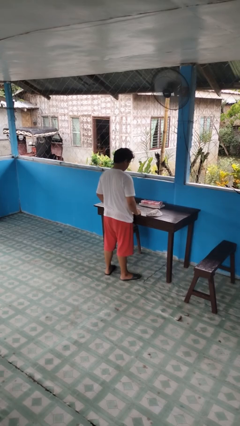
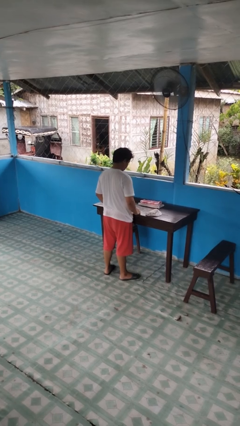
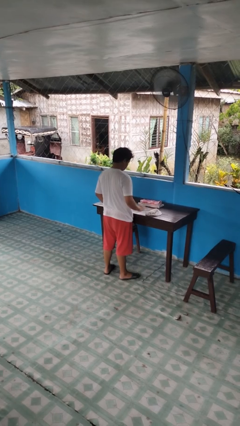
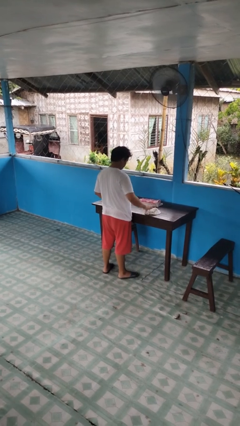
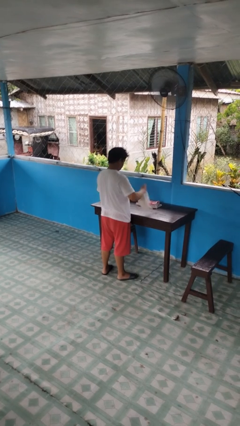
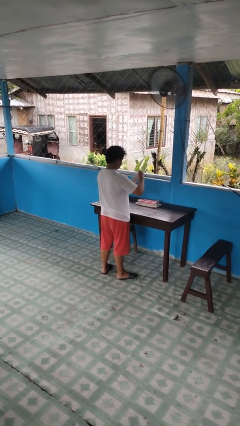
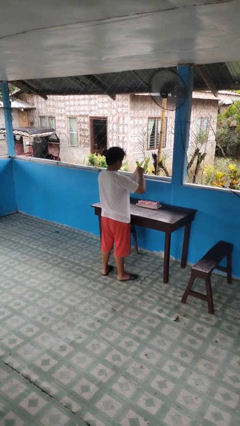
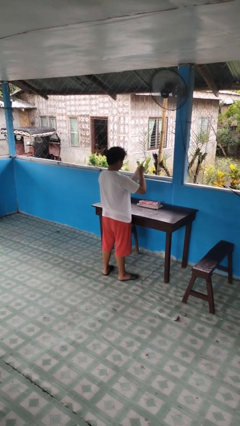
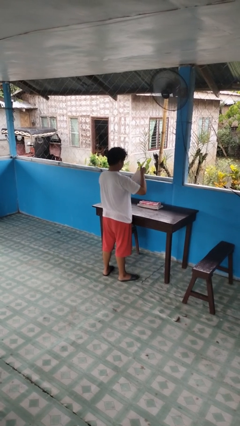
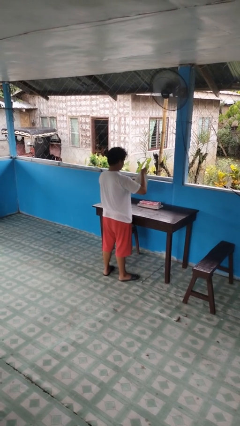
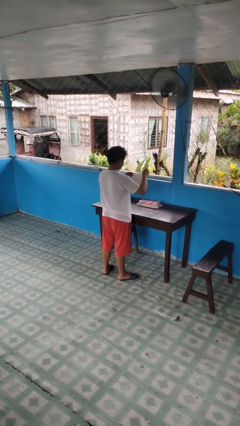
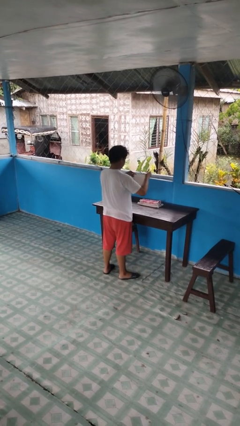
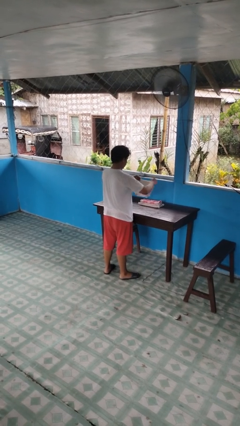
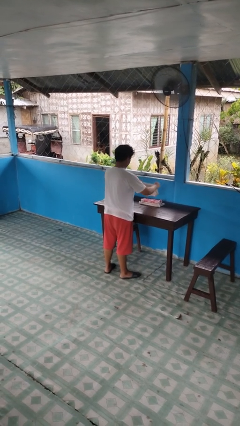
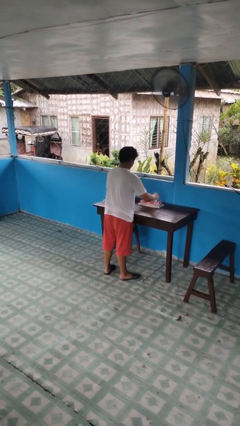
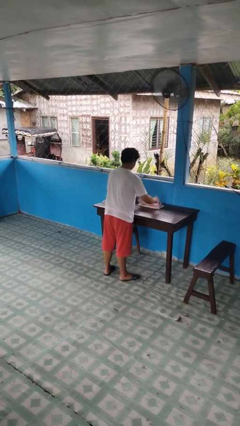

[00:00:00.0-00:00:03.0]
person folds towel

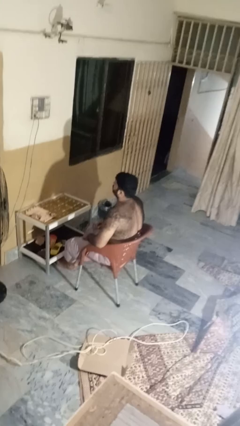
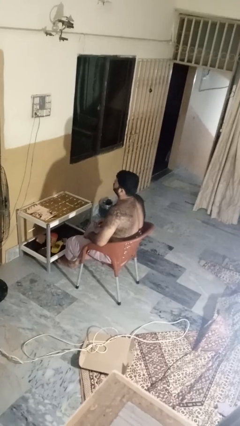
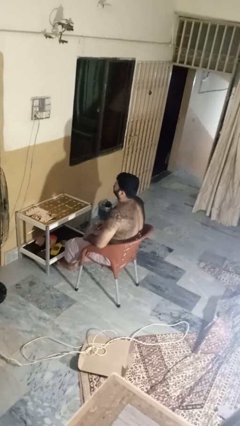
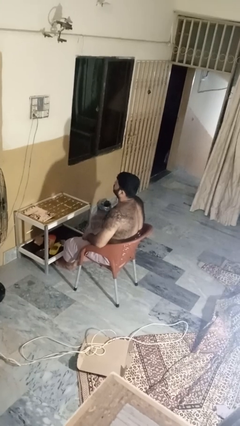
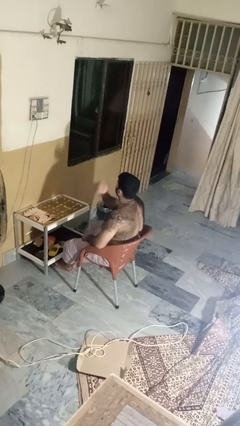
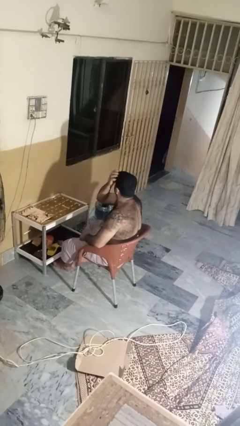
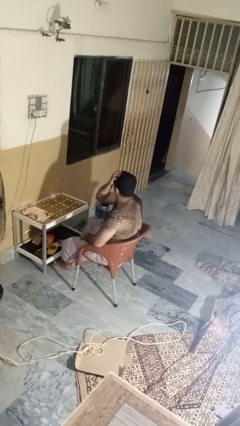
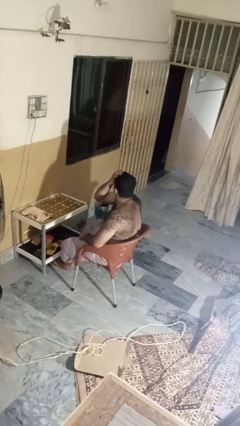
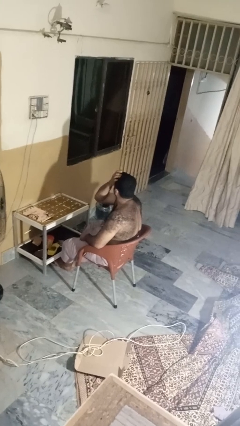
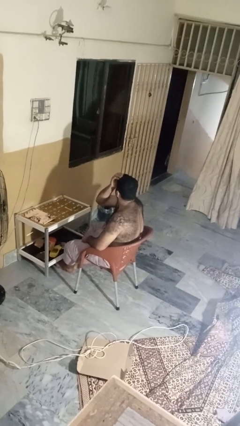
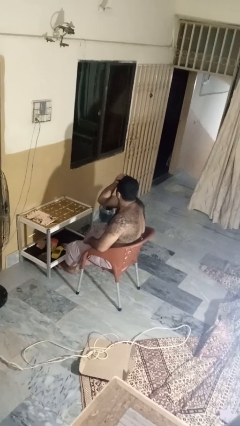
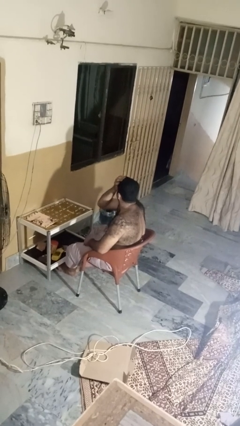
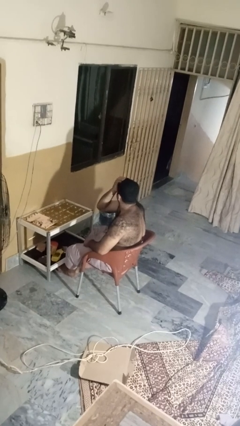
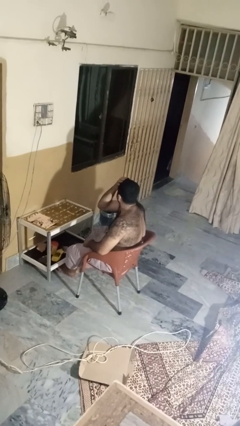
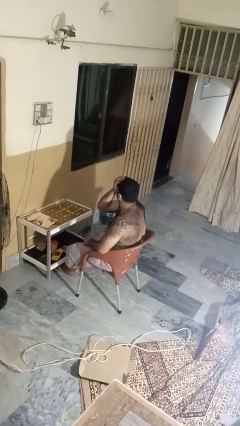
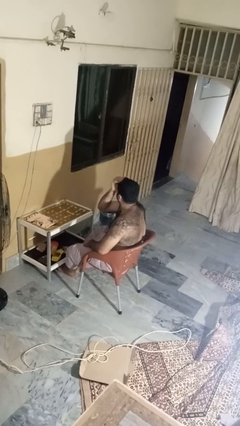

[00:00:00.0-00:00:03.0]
person rubs eyes

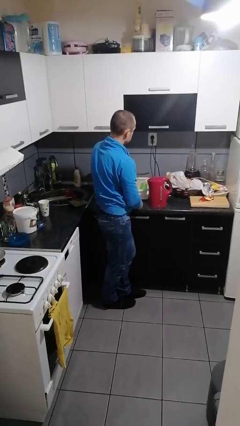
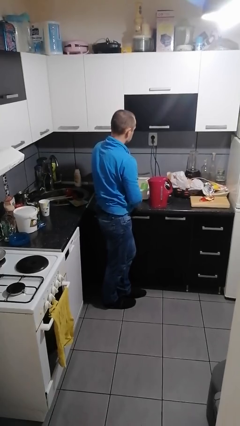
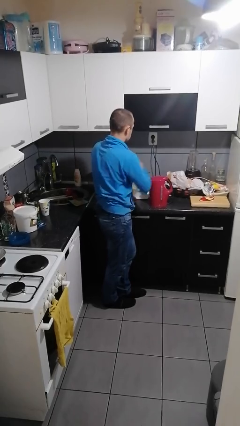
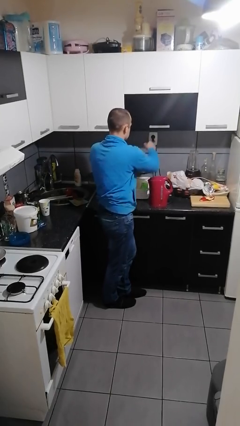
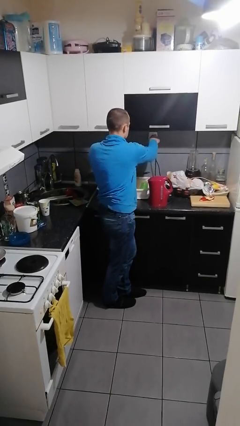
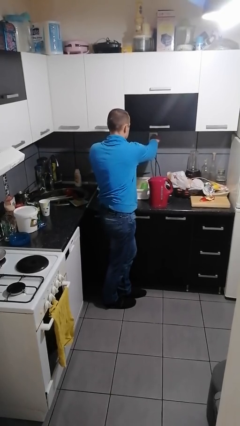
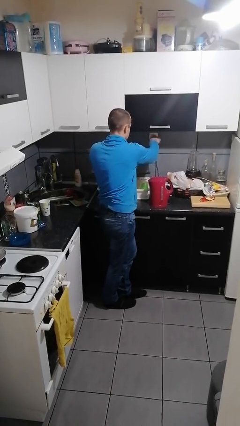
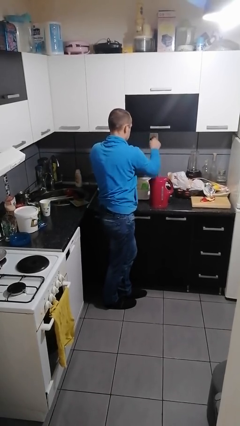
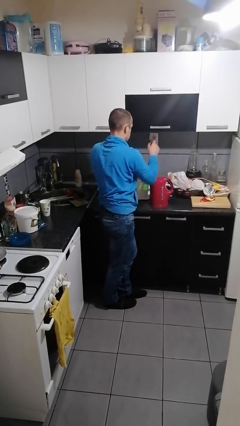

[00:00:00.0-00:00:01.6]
person unplugs from electrical socket

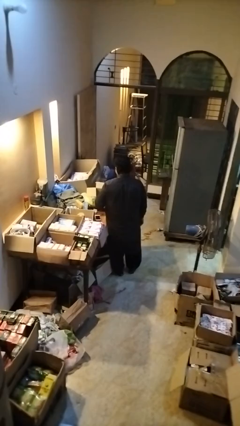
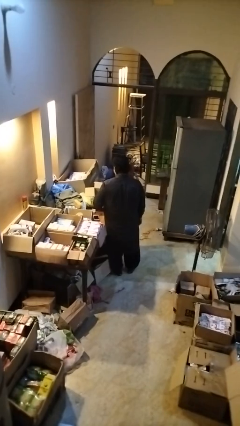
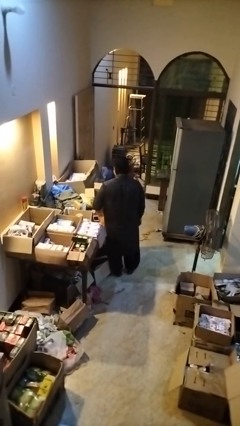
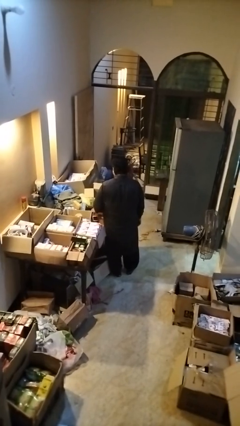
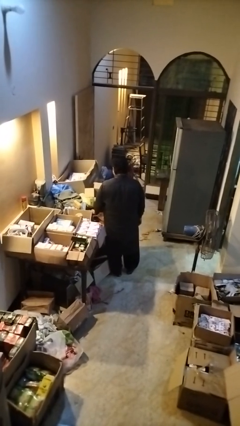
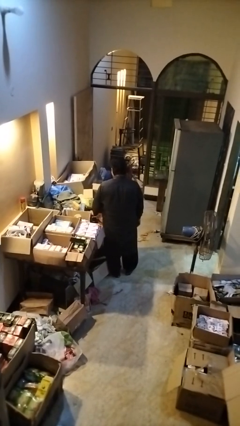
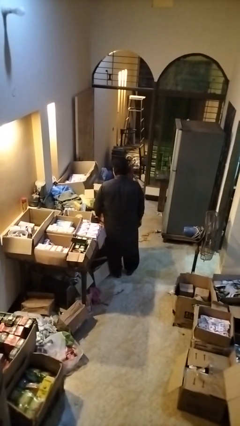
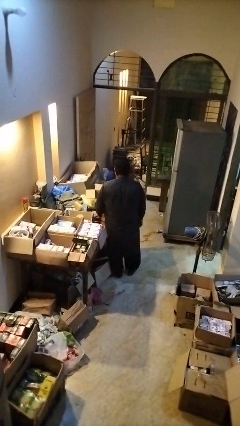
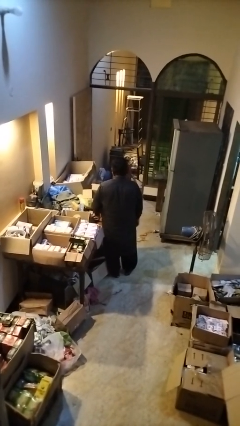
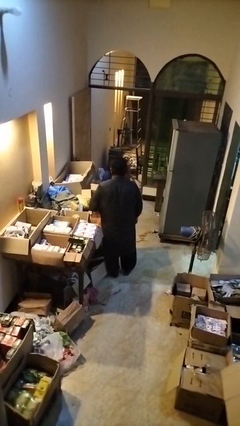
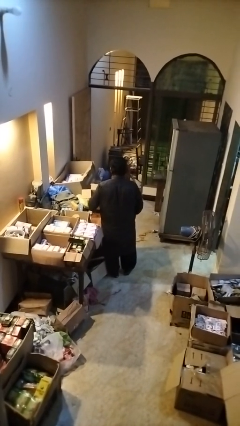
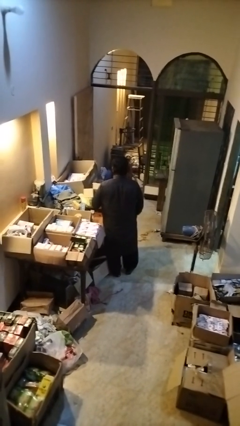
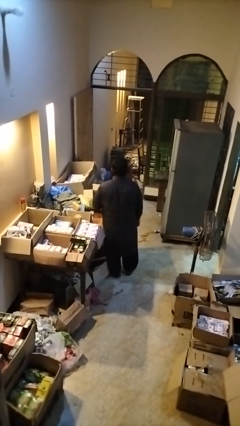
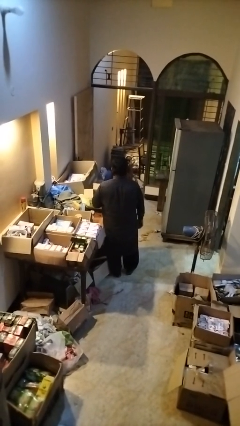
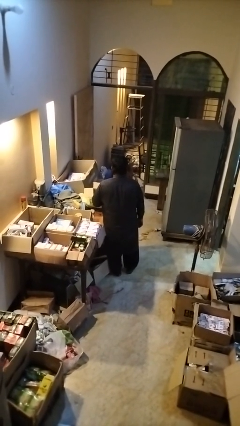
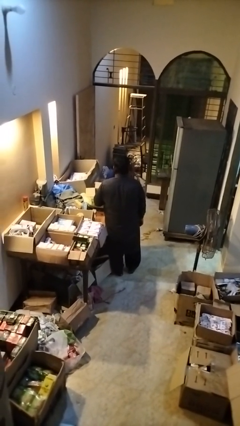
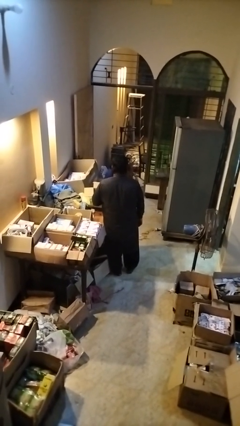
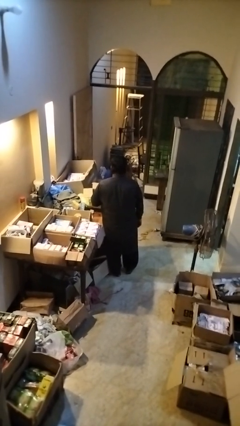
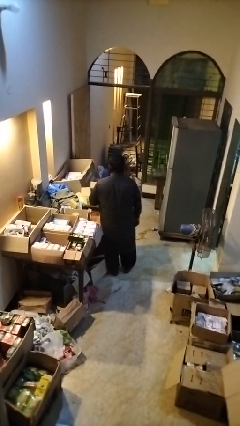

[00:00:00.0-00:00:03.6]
person puts object into box

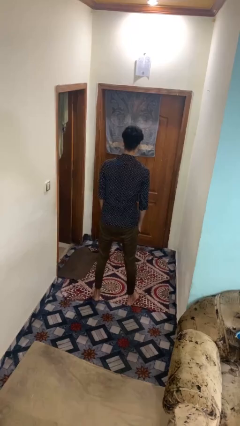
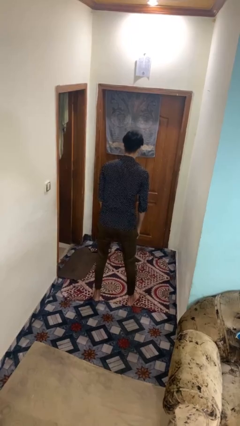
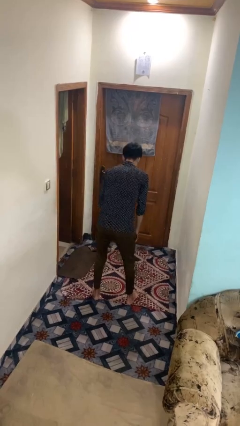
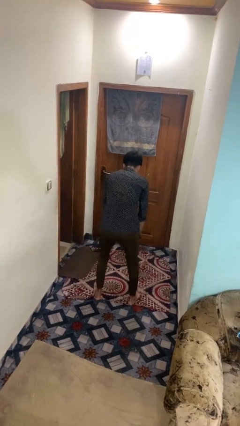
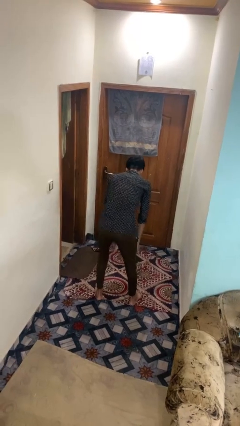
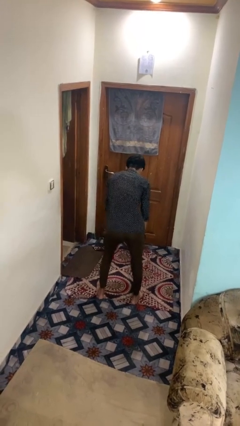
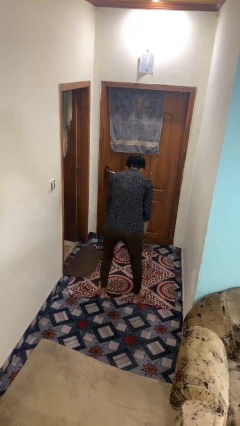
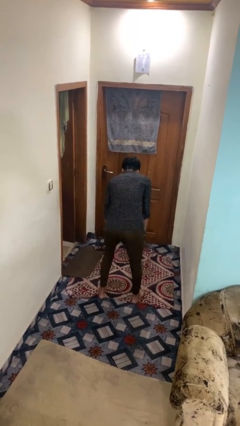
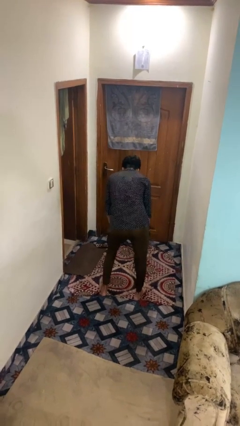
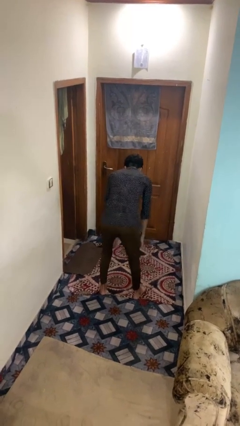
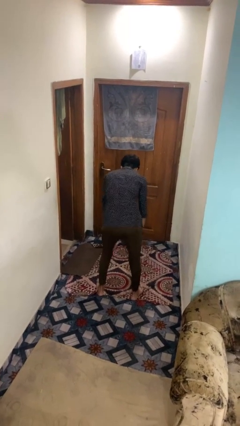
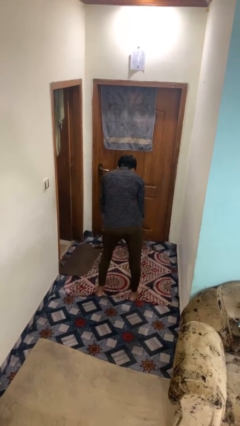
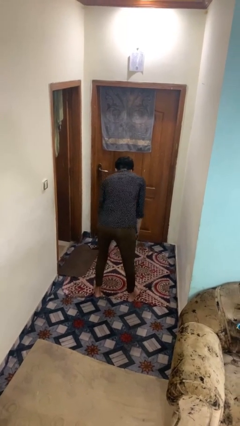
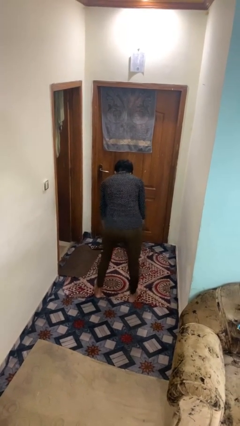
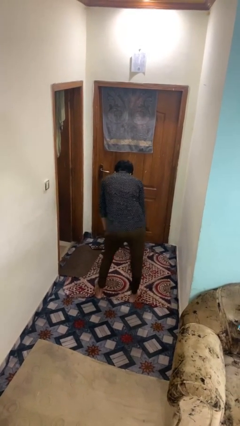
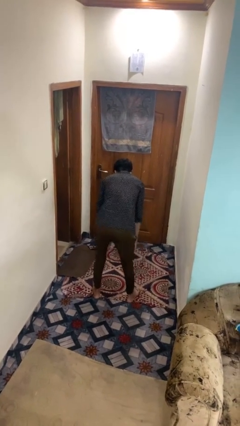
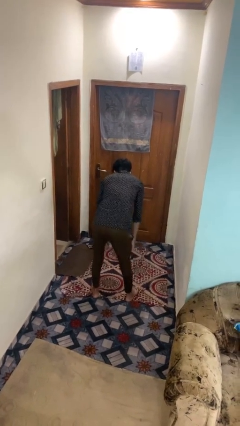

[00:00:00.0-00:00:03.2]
person wiggles hips

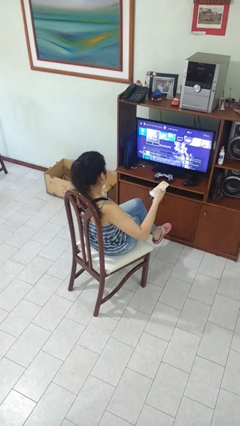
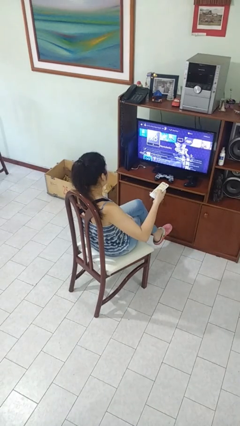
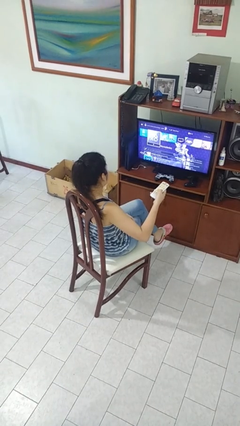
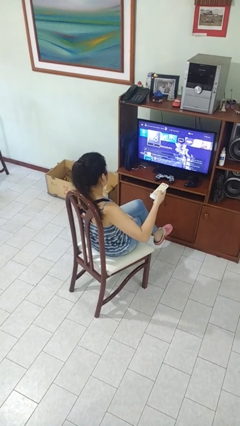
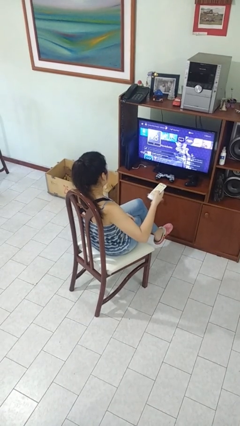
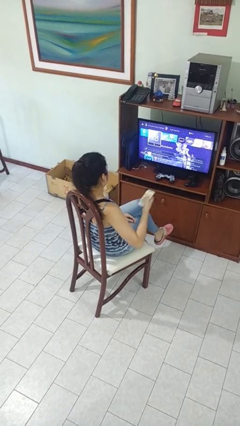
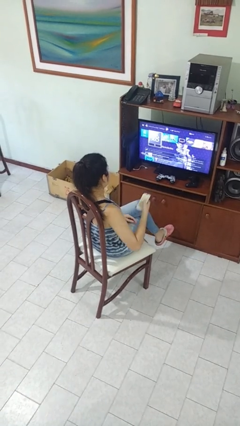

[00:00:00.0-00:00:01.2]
person uses television remote

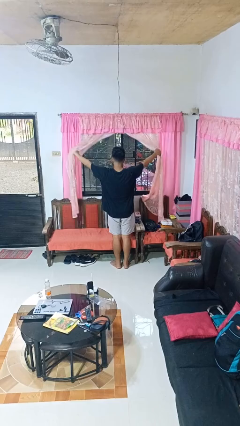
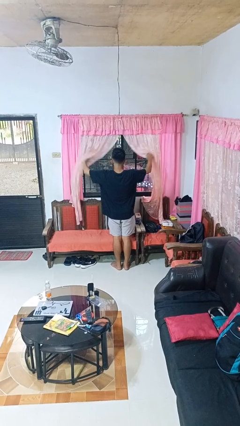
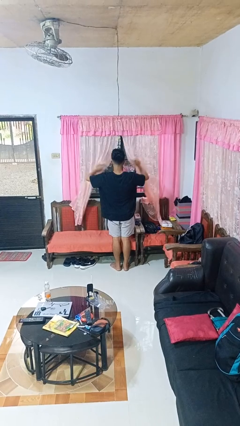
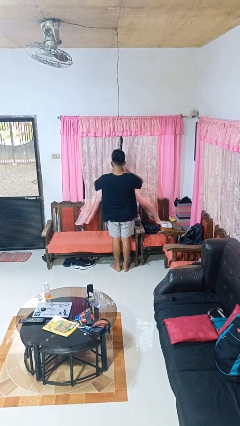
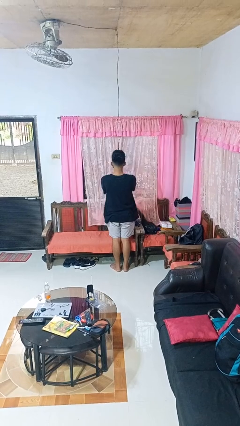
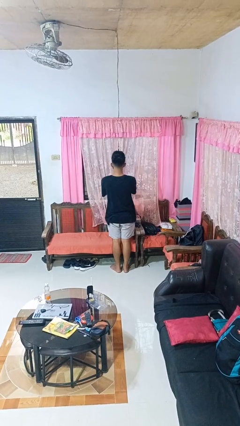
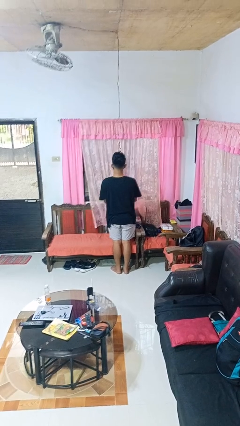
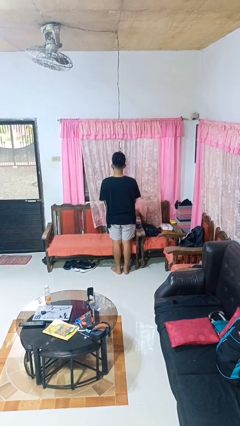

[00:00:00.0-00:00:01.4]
person closes curtains
